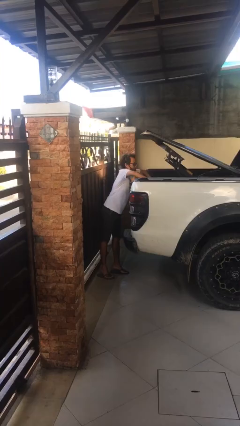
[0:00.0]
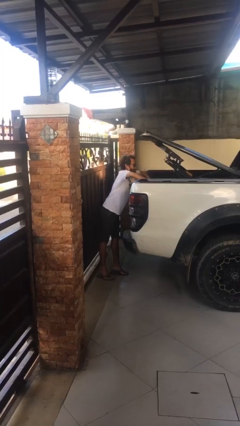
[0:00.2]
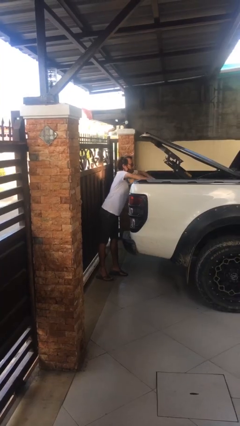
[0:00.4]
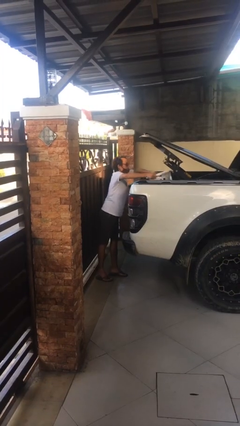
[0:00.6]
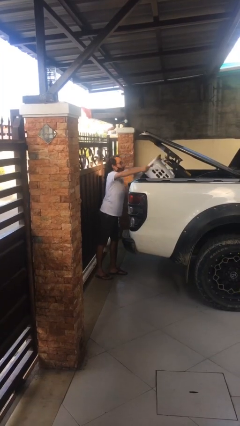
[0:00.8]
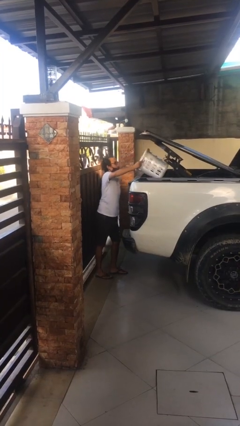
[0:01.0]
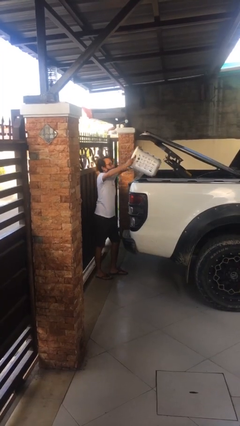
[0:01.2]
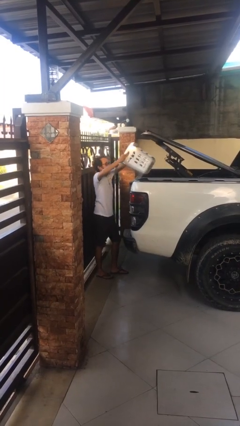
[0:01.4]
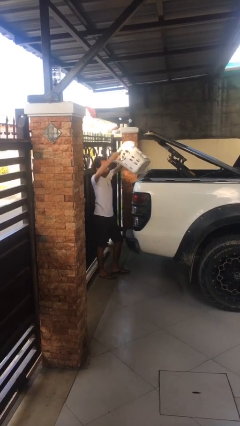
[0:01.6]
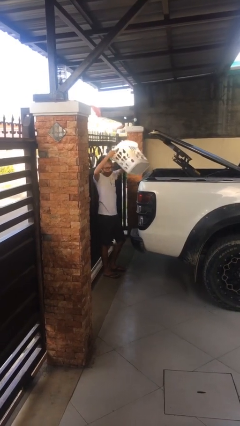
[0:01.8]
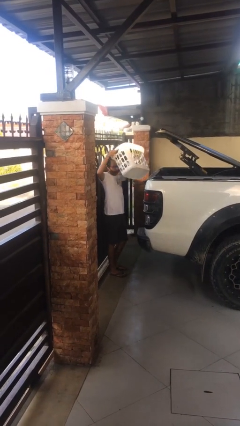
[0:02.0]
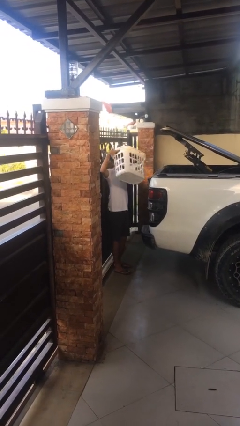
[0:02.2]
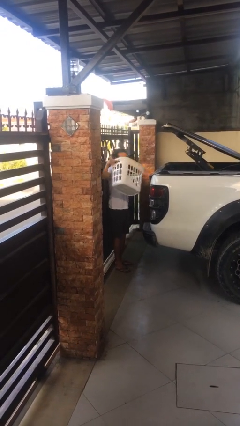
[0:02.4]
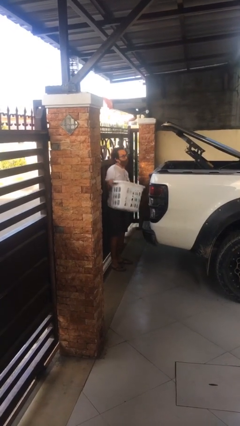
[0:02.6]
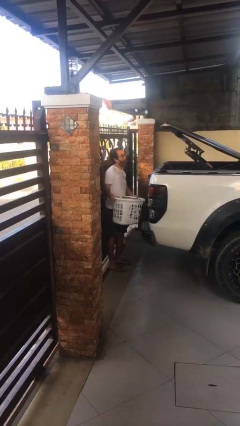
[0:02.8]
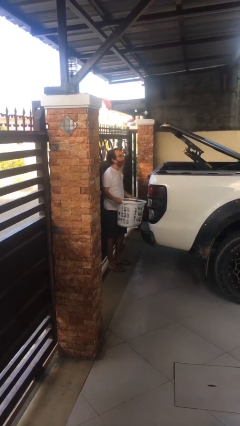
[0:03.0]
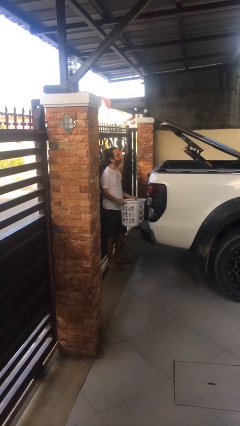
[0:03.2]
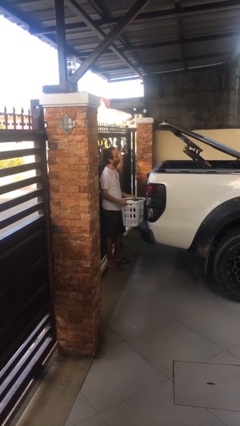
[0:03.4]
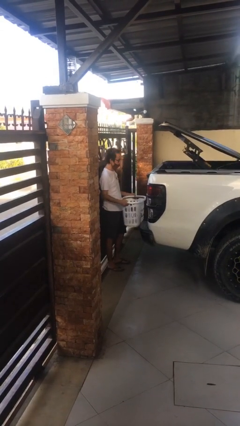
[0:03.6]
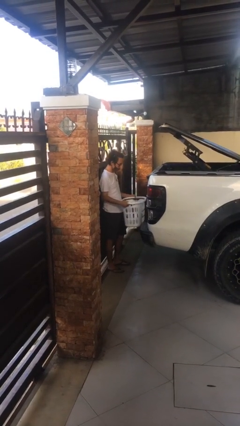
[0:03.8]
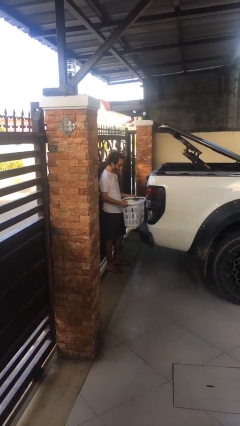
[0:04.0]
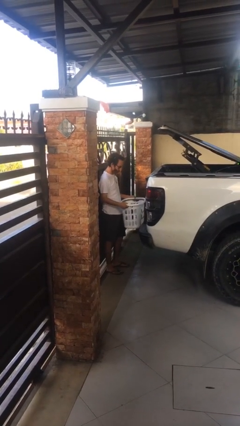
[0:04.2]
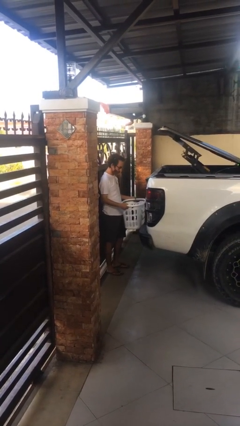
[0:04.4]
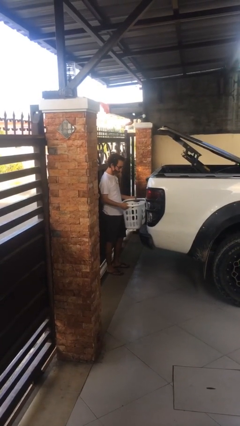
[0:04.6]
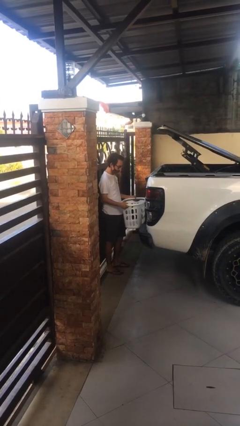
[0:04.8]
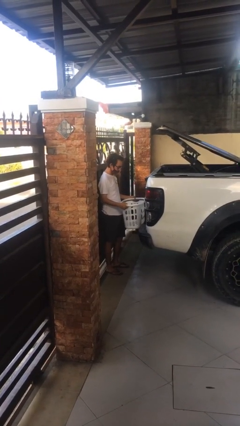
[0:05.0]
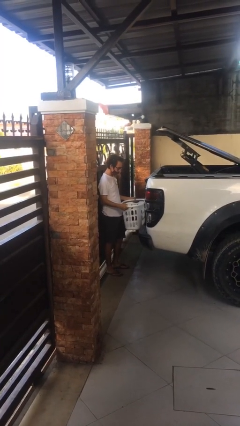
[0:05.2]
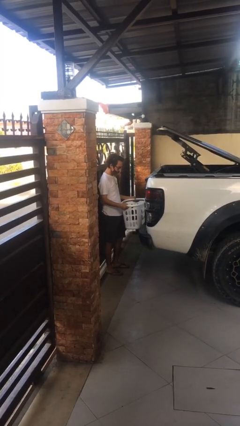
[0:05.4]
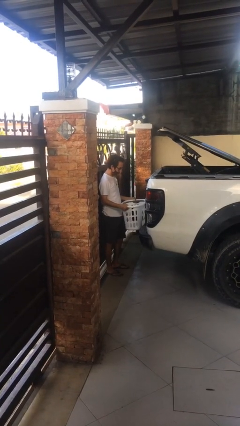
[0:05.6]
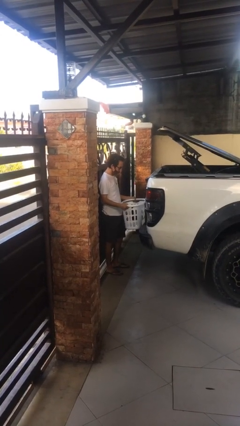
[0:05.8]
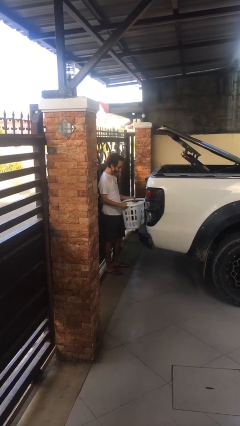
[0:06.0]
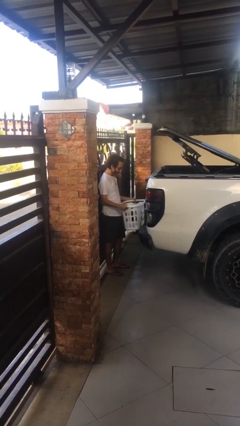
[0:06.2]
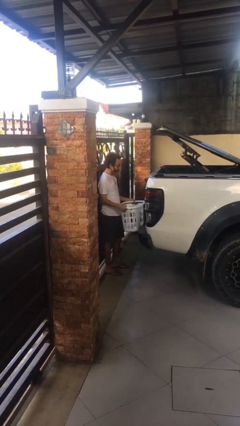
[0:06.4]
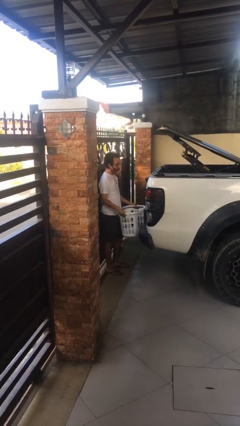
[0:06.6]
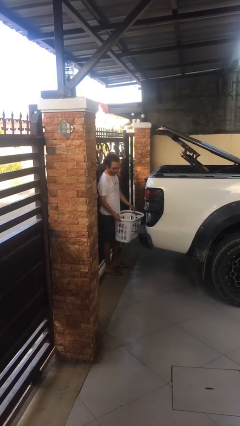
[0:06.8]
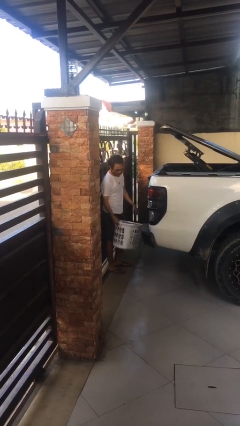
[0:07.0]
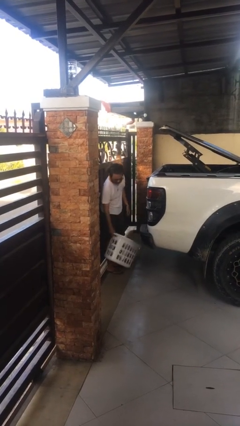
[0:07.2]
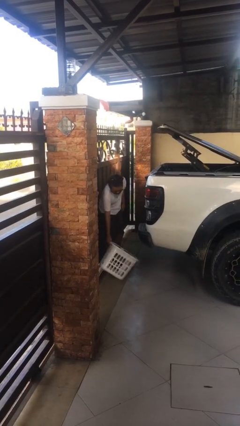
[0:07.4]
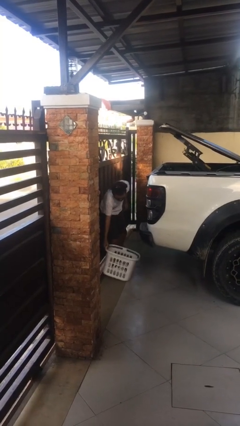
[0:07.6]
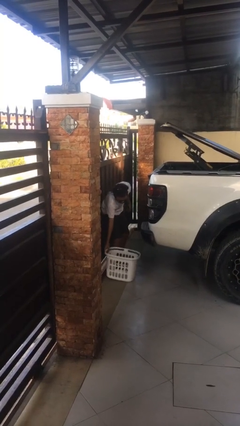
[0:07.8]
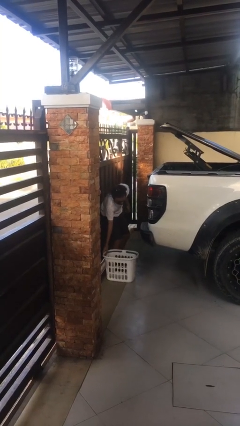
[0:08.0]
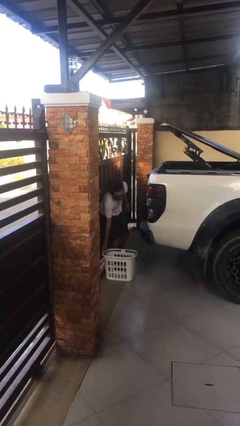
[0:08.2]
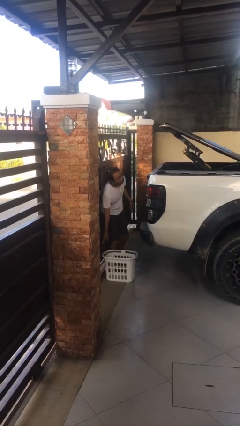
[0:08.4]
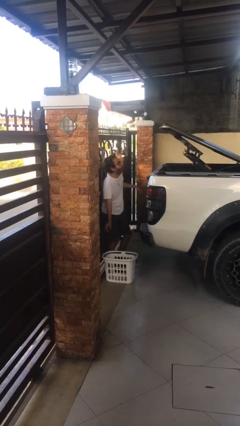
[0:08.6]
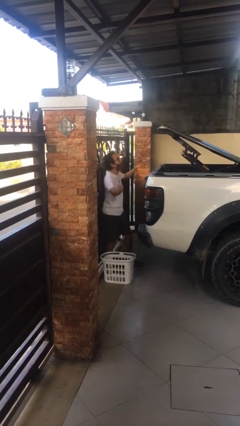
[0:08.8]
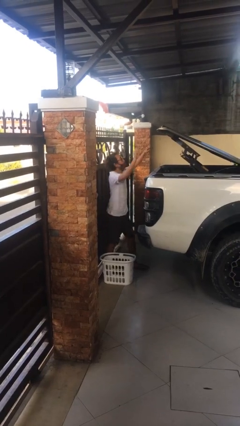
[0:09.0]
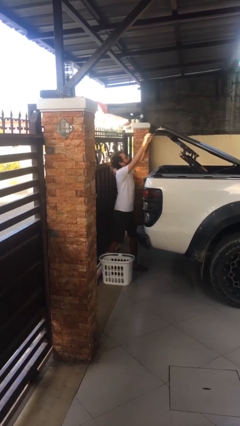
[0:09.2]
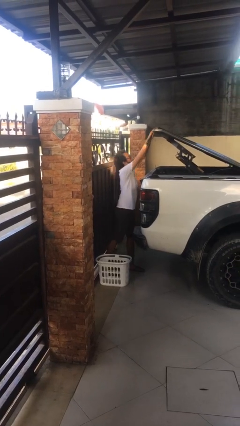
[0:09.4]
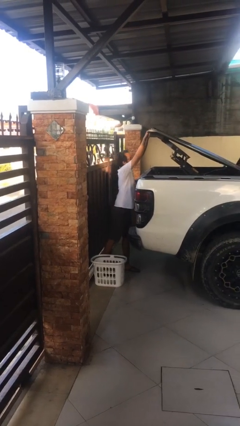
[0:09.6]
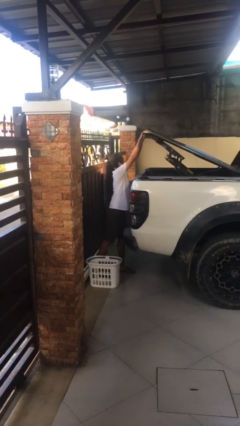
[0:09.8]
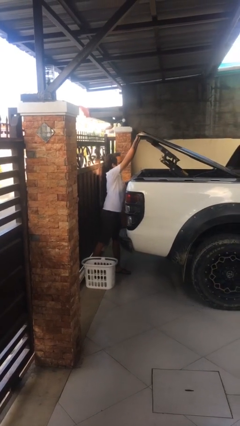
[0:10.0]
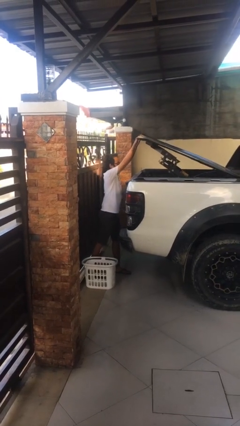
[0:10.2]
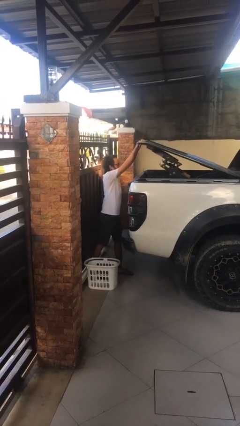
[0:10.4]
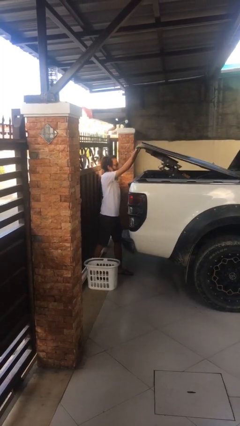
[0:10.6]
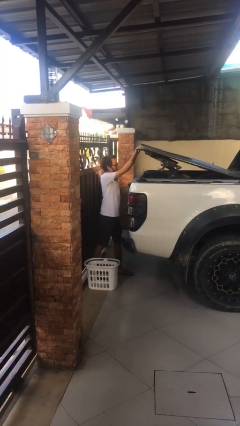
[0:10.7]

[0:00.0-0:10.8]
person unloads car

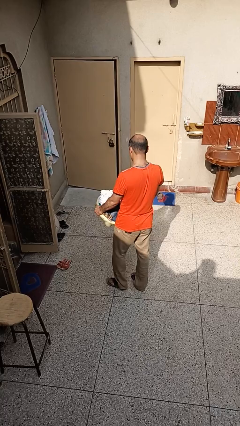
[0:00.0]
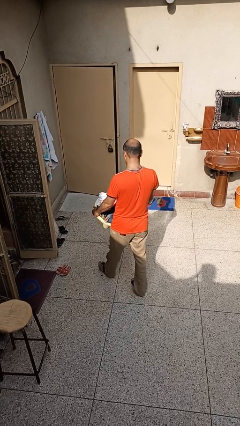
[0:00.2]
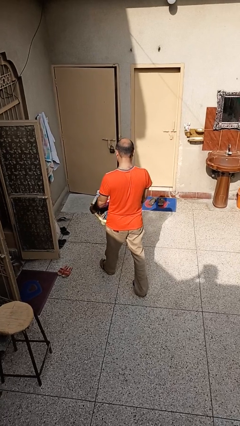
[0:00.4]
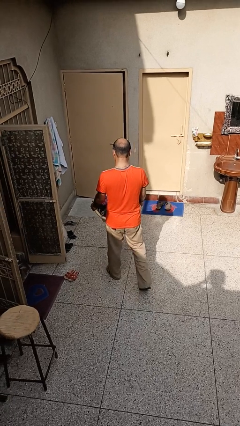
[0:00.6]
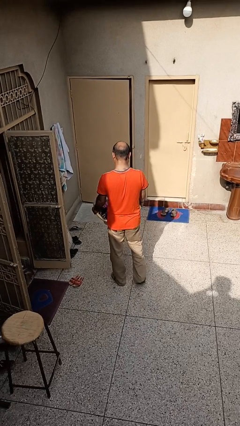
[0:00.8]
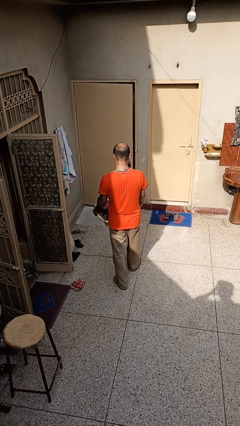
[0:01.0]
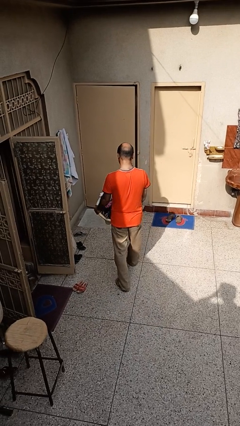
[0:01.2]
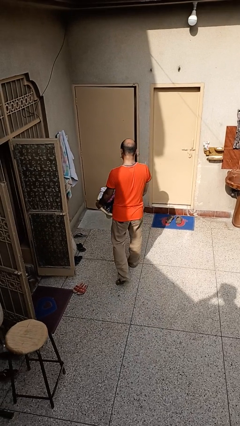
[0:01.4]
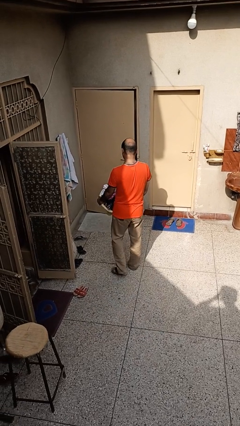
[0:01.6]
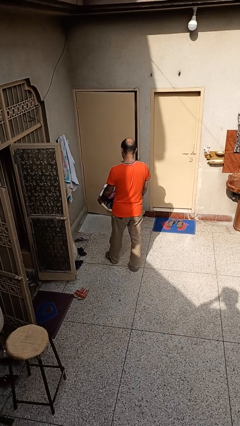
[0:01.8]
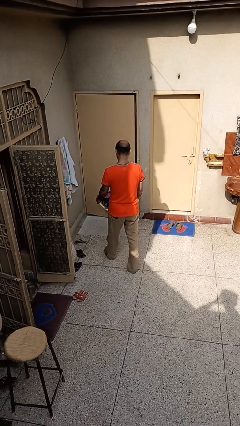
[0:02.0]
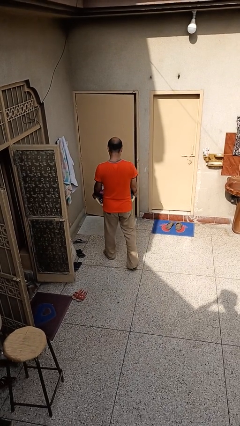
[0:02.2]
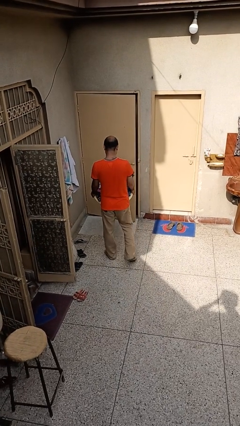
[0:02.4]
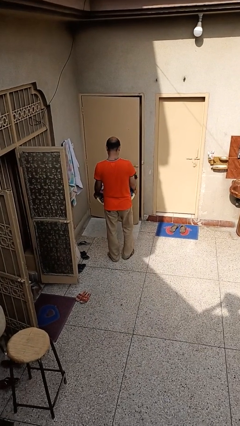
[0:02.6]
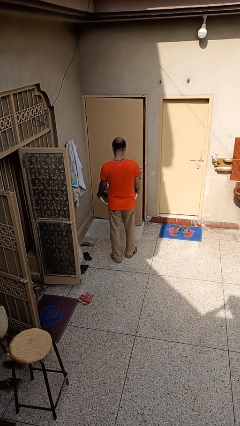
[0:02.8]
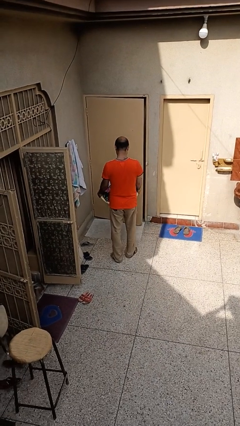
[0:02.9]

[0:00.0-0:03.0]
person carries laundry basket

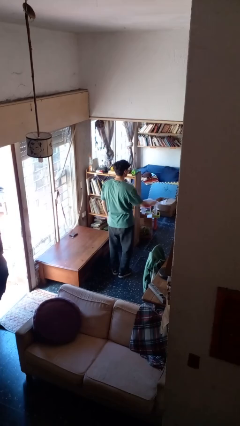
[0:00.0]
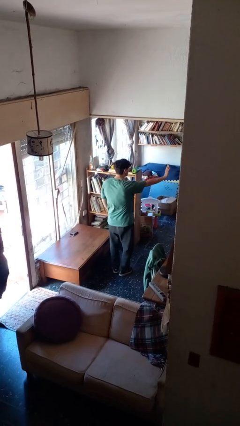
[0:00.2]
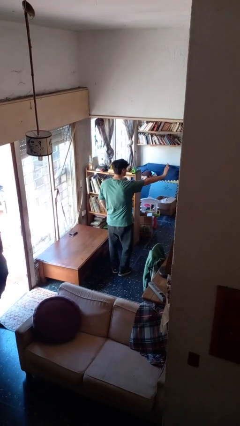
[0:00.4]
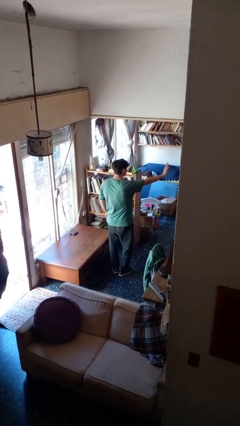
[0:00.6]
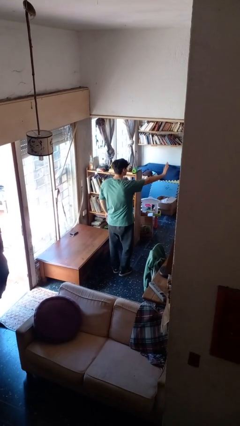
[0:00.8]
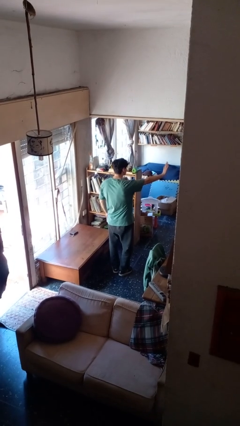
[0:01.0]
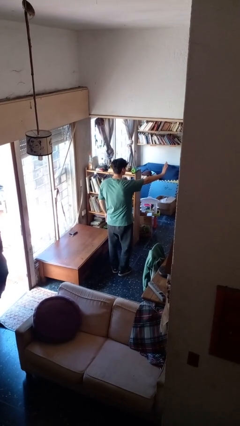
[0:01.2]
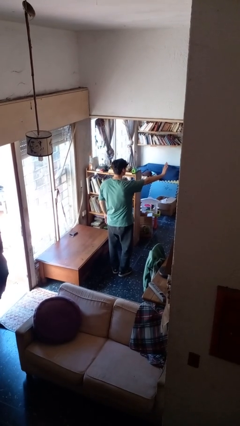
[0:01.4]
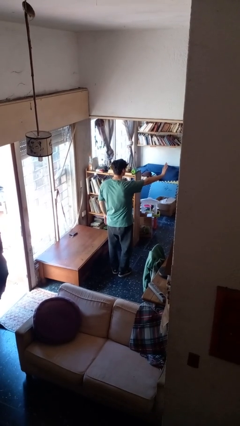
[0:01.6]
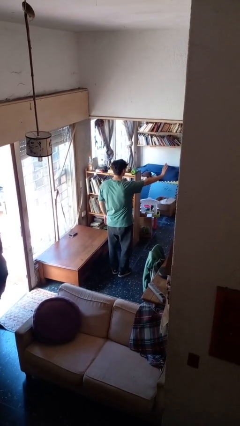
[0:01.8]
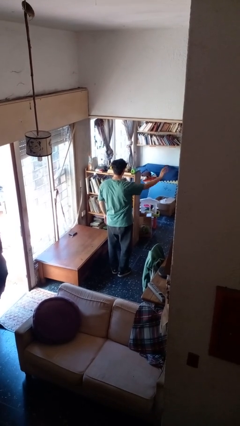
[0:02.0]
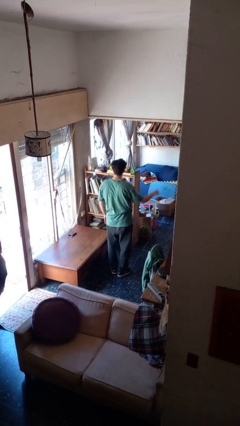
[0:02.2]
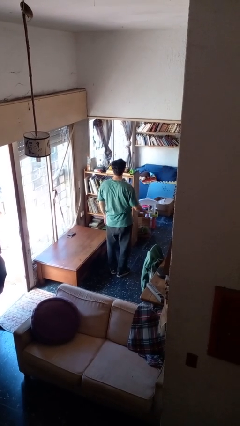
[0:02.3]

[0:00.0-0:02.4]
person gestures stop

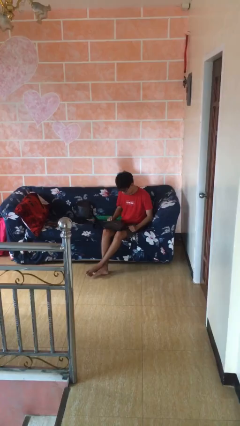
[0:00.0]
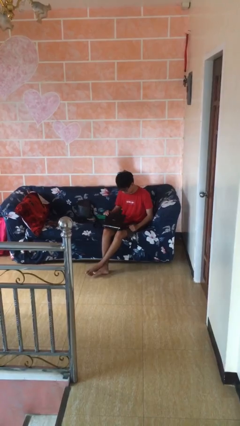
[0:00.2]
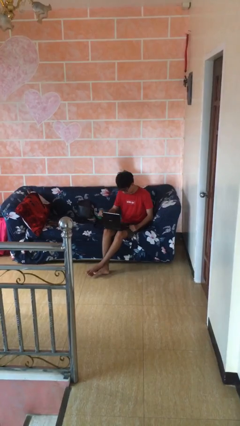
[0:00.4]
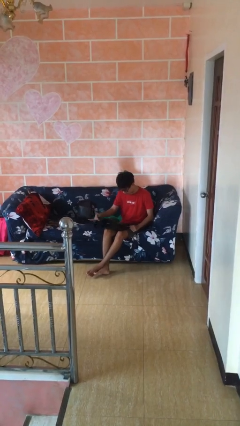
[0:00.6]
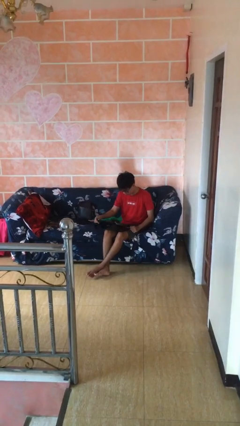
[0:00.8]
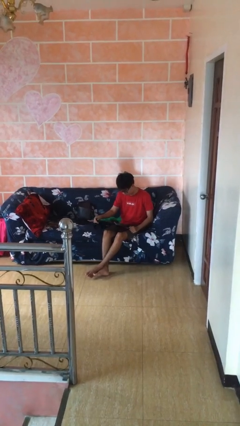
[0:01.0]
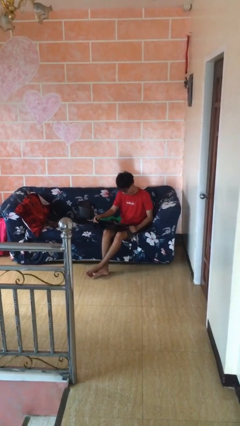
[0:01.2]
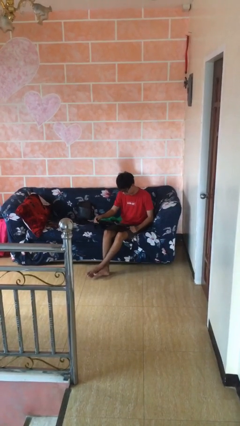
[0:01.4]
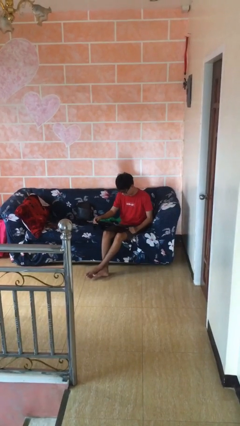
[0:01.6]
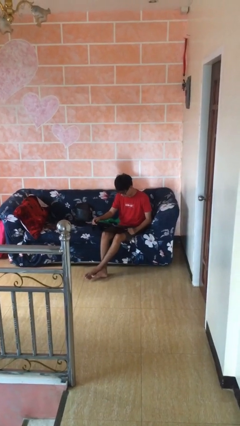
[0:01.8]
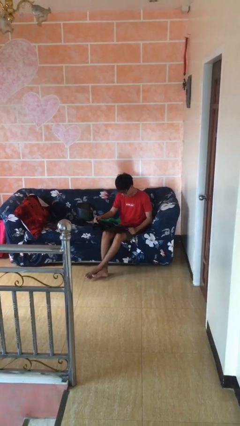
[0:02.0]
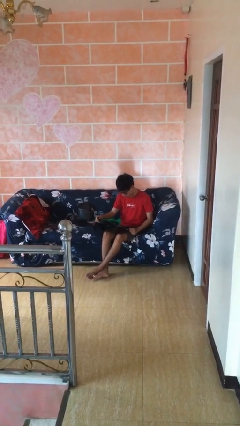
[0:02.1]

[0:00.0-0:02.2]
person interacts with laptop
